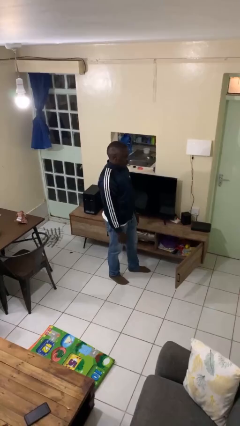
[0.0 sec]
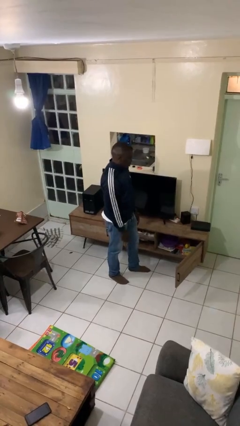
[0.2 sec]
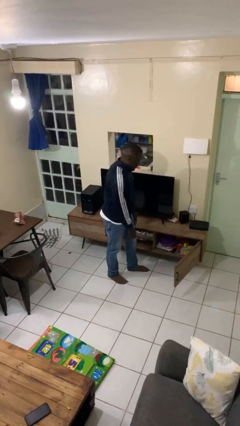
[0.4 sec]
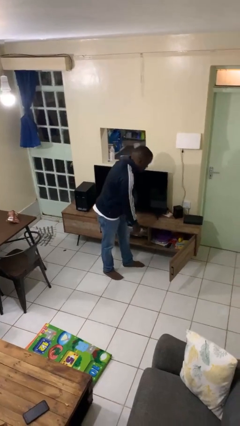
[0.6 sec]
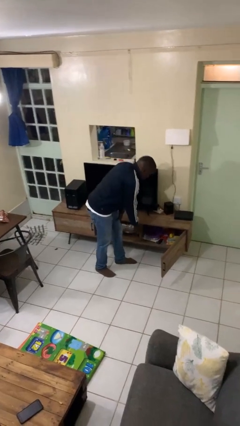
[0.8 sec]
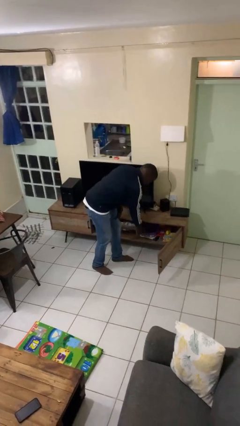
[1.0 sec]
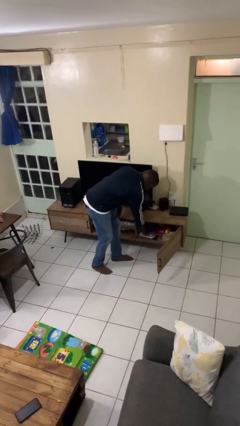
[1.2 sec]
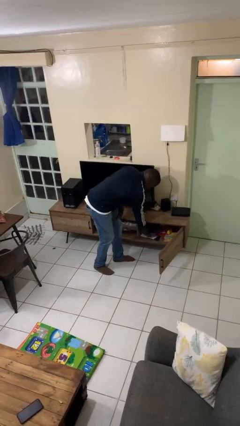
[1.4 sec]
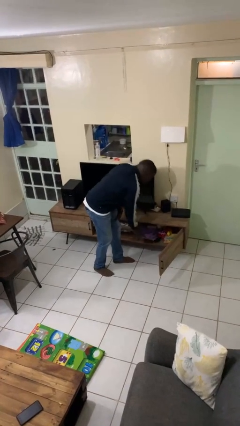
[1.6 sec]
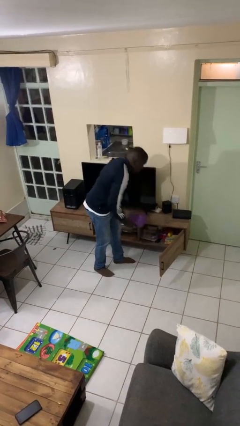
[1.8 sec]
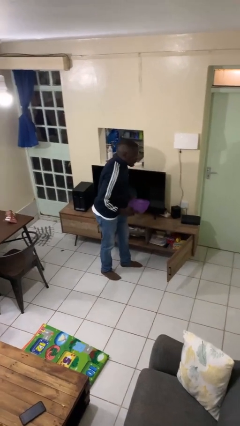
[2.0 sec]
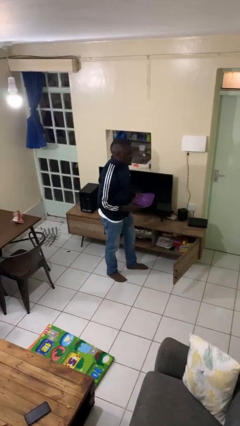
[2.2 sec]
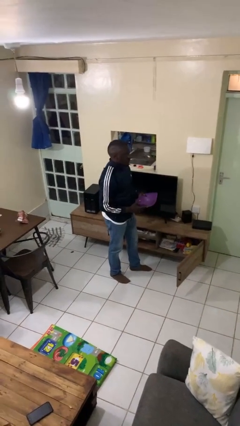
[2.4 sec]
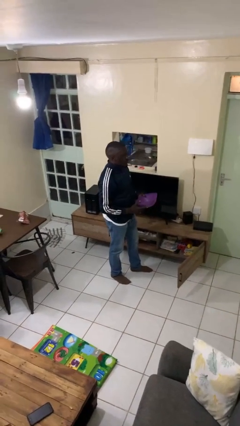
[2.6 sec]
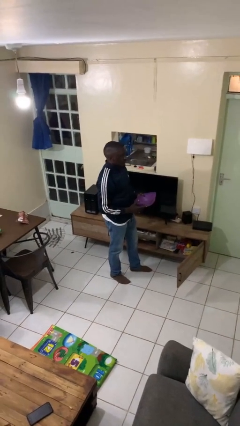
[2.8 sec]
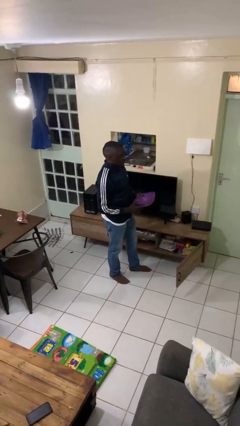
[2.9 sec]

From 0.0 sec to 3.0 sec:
person picks up object from cabinet

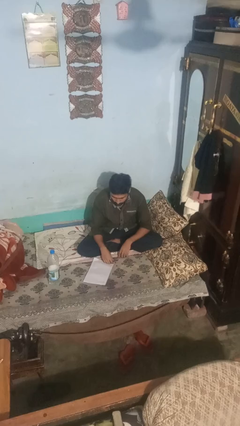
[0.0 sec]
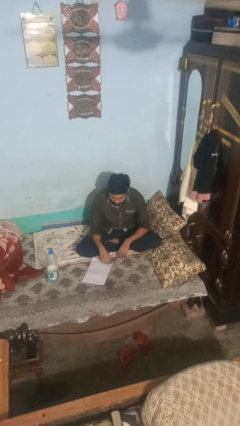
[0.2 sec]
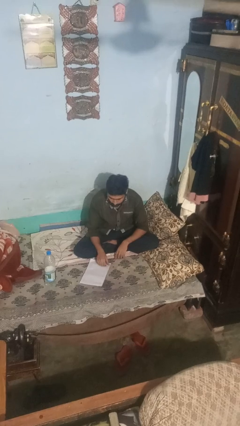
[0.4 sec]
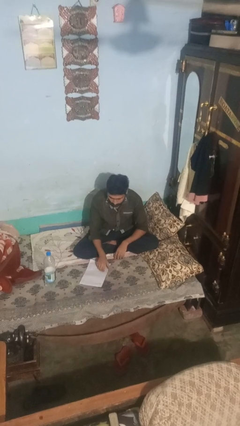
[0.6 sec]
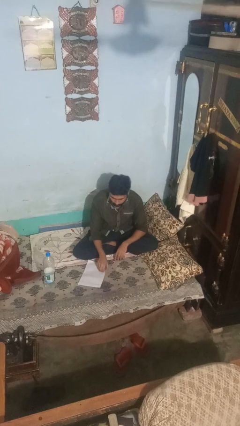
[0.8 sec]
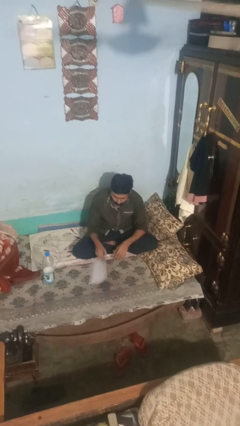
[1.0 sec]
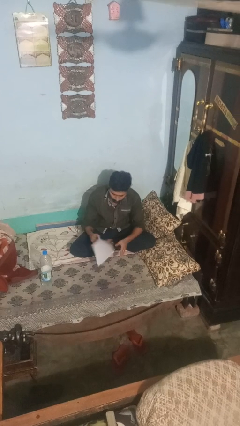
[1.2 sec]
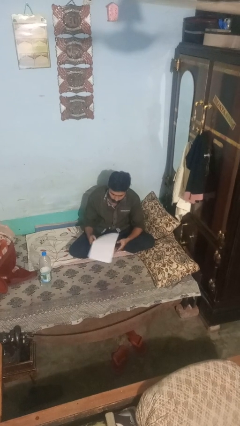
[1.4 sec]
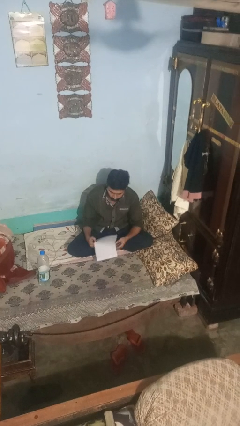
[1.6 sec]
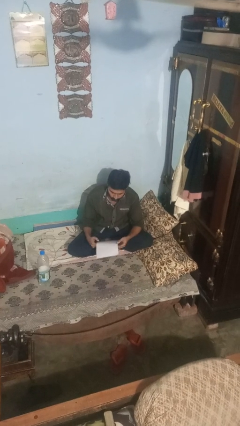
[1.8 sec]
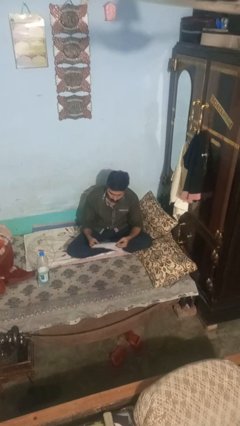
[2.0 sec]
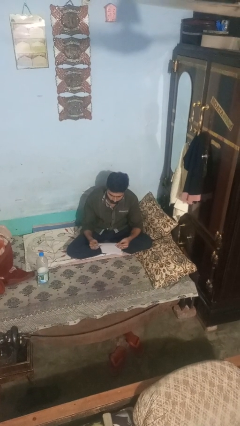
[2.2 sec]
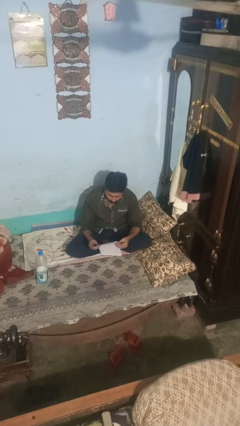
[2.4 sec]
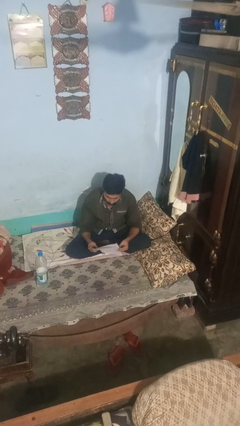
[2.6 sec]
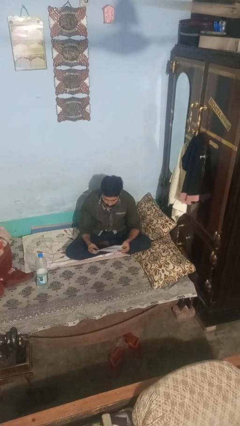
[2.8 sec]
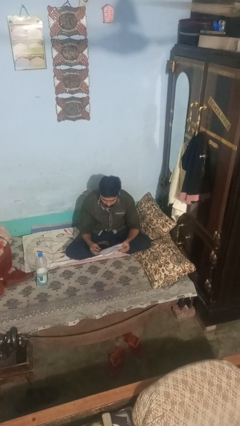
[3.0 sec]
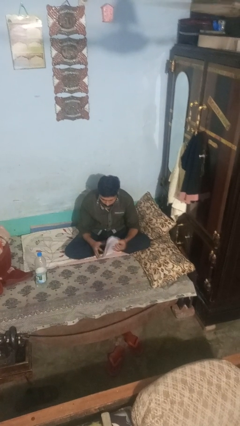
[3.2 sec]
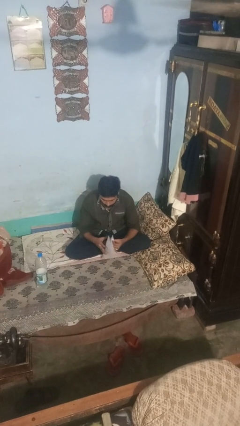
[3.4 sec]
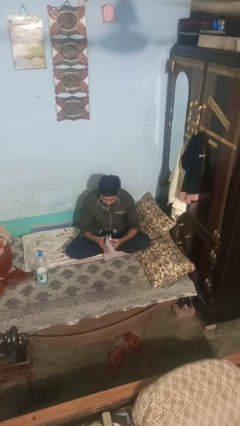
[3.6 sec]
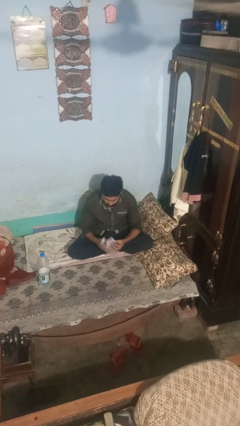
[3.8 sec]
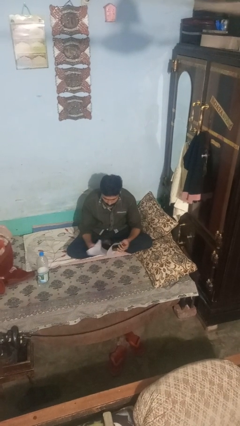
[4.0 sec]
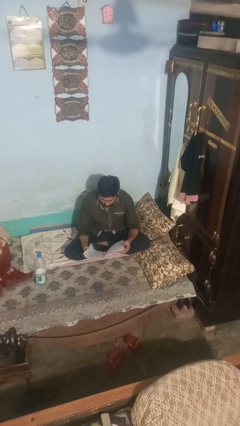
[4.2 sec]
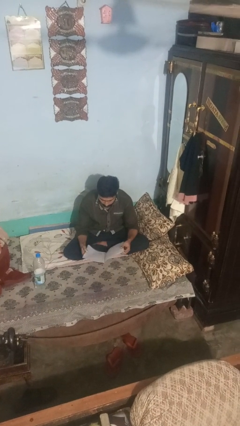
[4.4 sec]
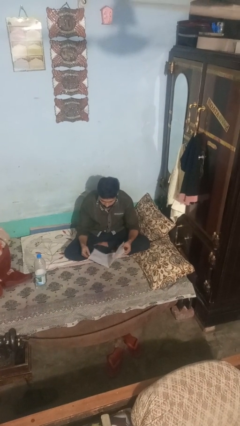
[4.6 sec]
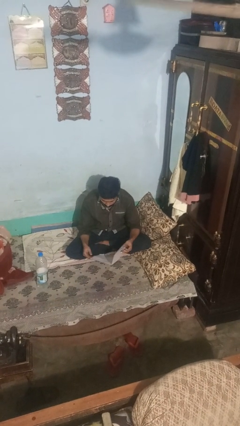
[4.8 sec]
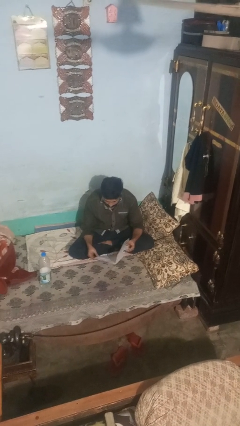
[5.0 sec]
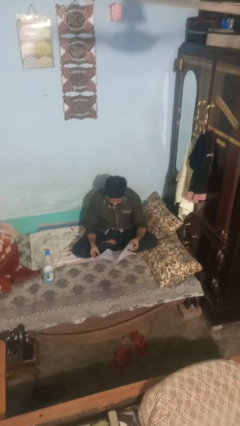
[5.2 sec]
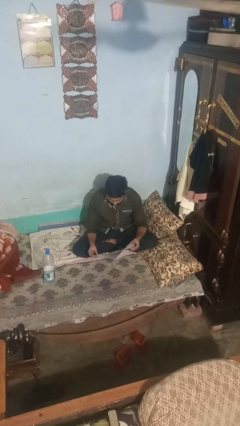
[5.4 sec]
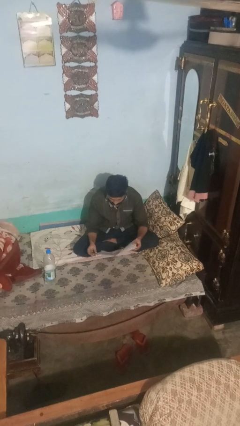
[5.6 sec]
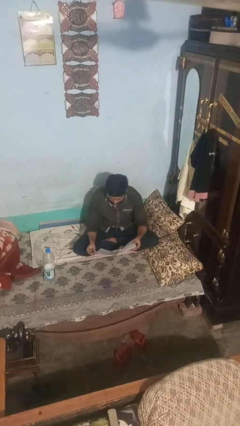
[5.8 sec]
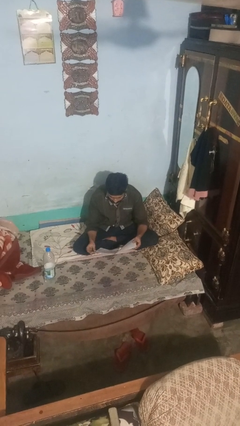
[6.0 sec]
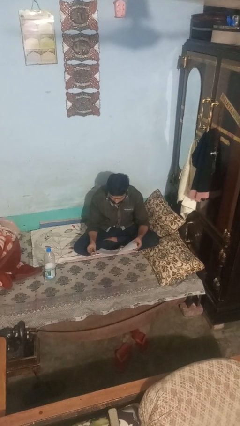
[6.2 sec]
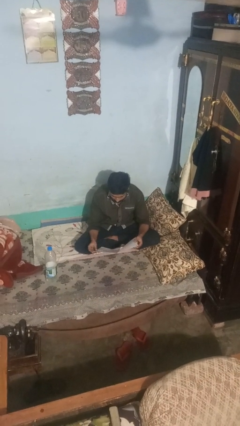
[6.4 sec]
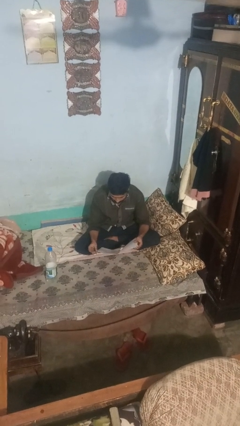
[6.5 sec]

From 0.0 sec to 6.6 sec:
person reads newspaper

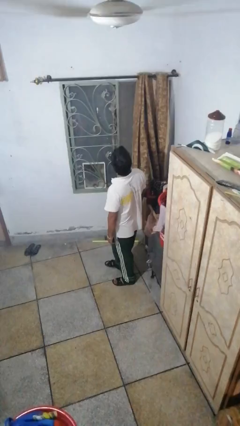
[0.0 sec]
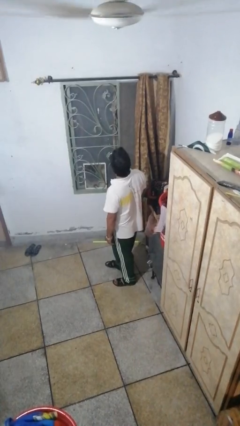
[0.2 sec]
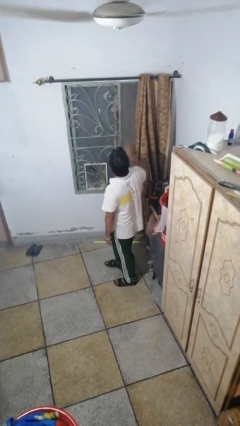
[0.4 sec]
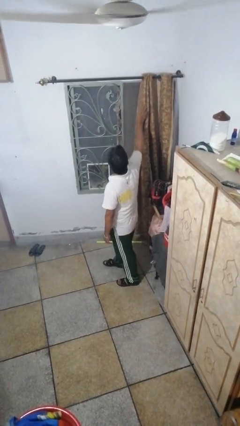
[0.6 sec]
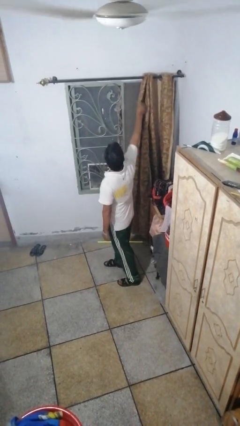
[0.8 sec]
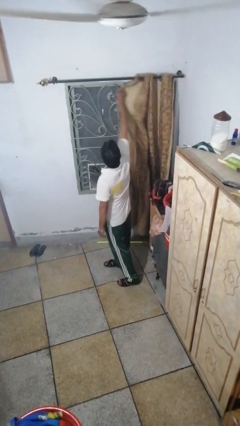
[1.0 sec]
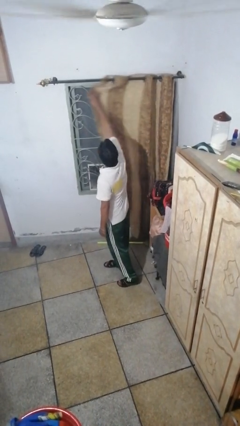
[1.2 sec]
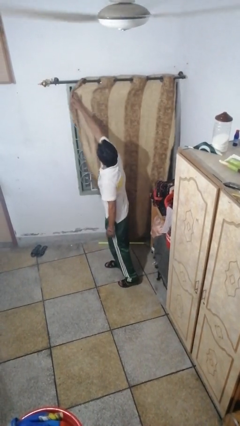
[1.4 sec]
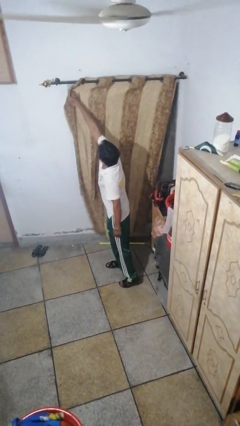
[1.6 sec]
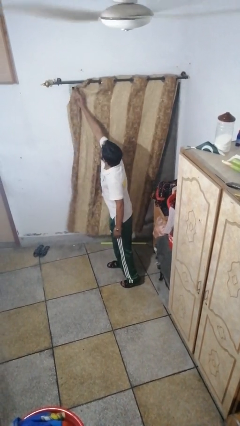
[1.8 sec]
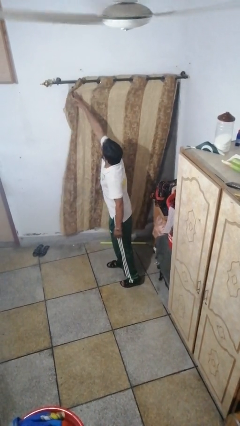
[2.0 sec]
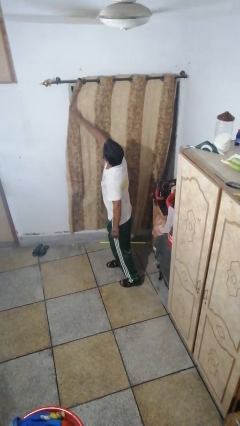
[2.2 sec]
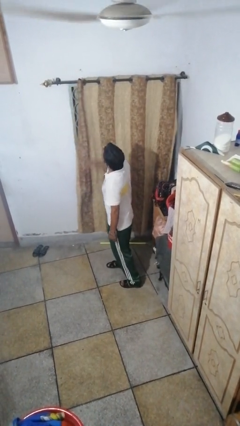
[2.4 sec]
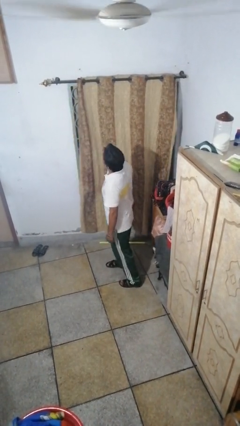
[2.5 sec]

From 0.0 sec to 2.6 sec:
person closes curtains

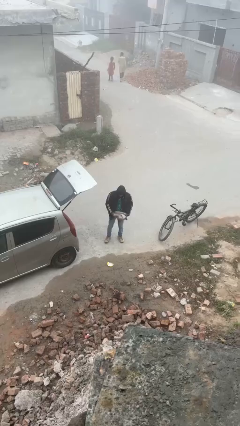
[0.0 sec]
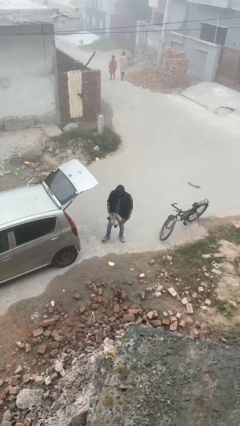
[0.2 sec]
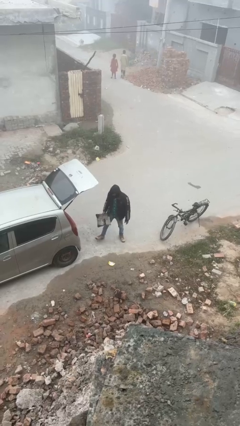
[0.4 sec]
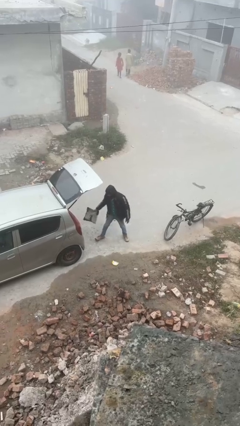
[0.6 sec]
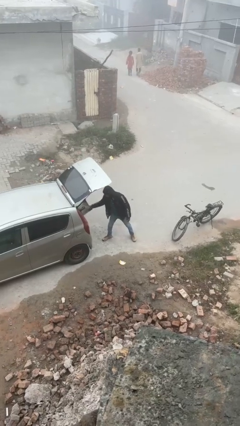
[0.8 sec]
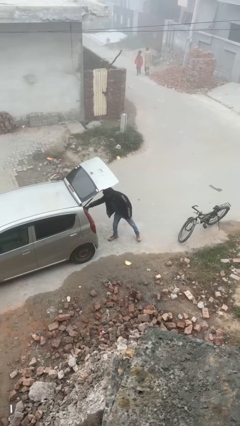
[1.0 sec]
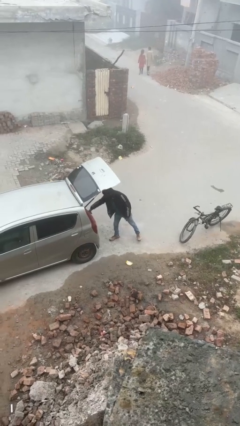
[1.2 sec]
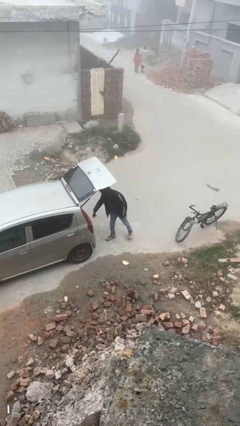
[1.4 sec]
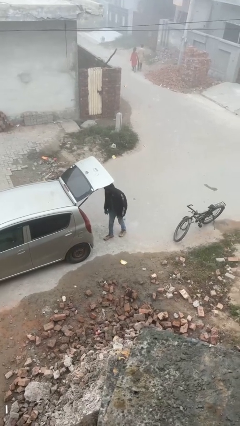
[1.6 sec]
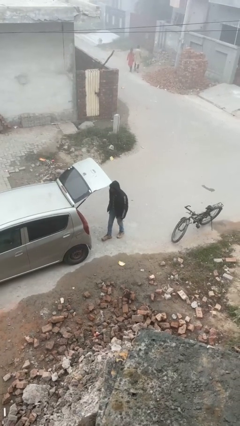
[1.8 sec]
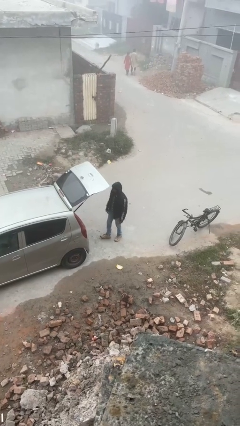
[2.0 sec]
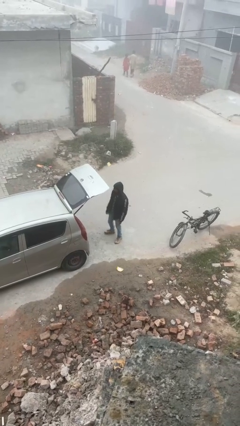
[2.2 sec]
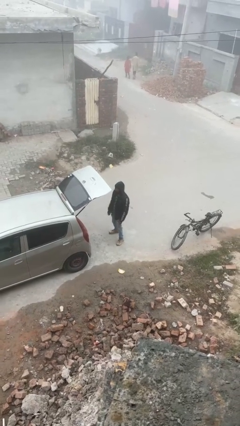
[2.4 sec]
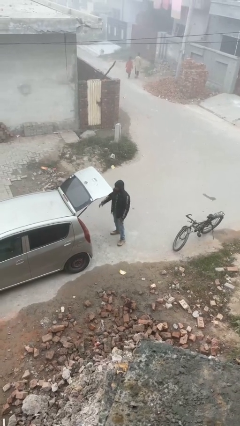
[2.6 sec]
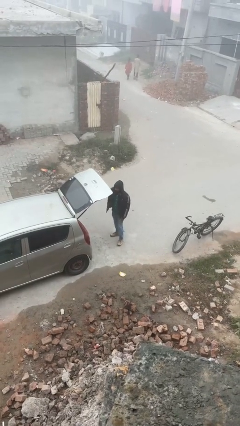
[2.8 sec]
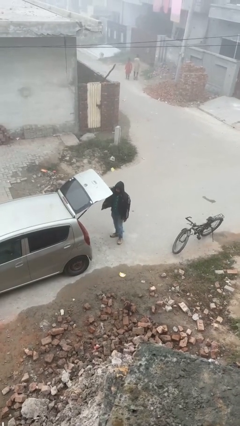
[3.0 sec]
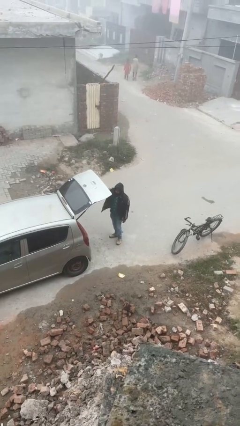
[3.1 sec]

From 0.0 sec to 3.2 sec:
person loads car

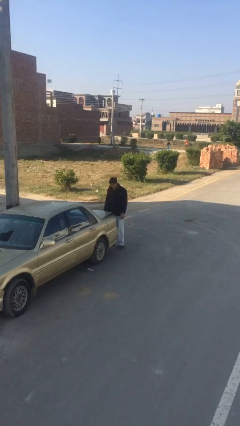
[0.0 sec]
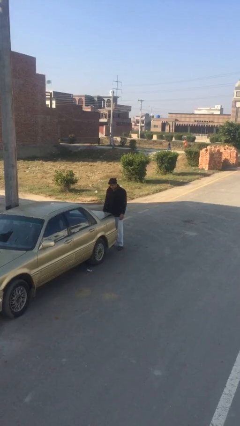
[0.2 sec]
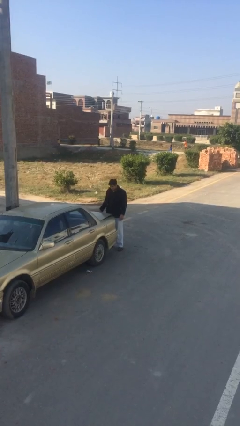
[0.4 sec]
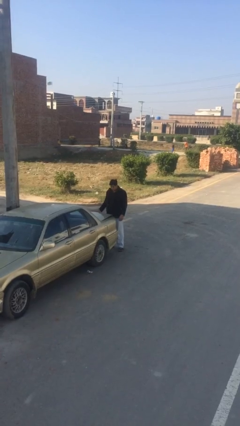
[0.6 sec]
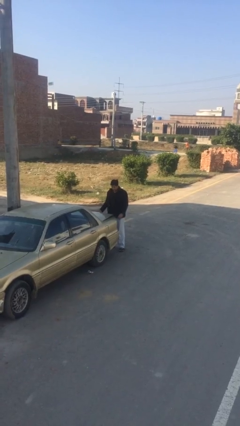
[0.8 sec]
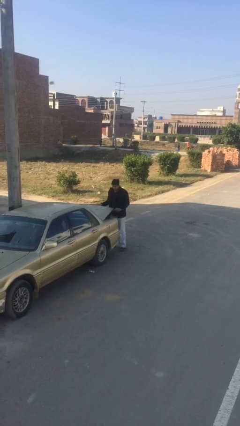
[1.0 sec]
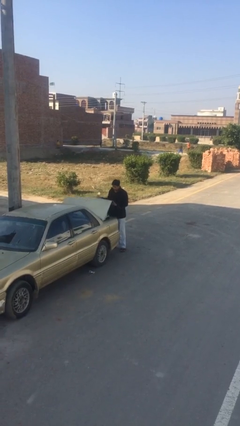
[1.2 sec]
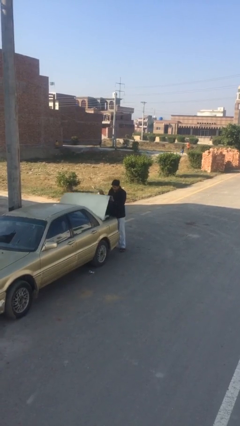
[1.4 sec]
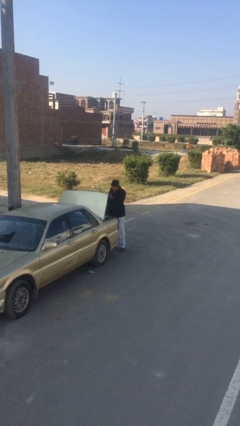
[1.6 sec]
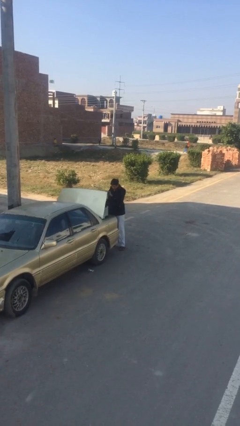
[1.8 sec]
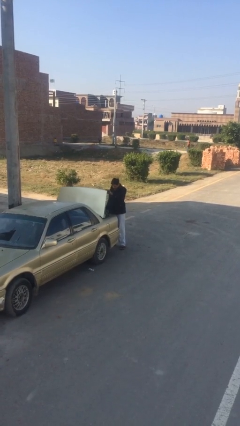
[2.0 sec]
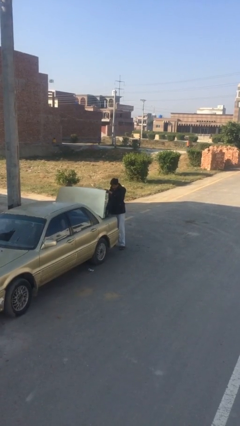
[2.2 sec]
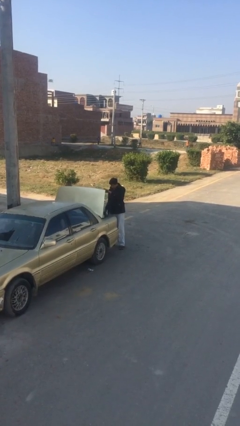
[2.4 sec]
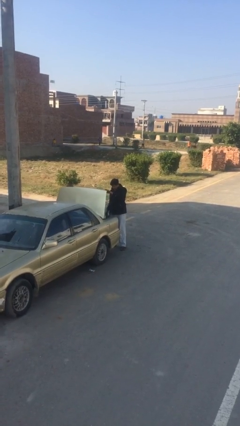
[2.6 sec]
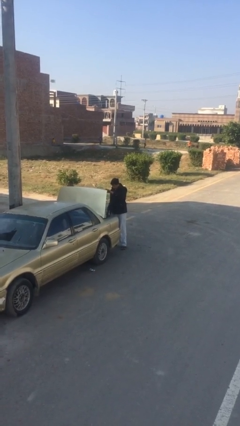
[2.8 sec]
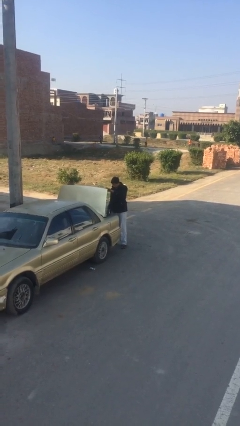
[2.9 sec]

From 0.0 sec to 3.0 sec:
person opens car trunk
